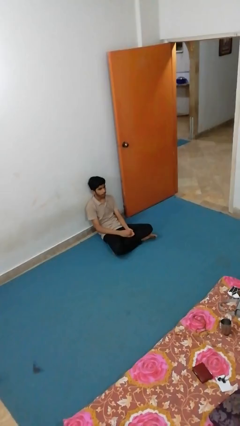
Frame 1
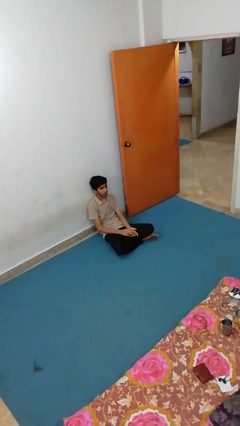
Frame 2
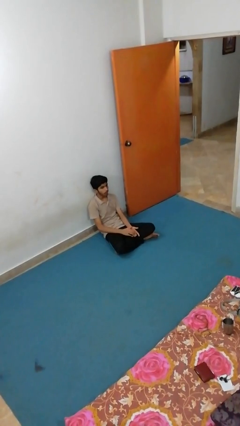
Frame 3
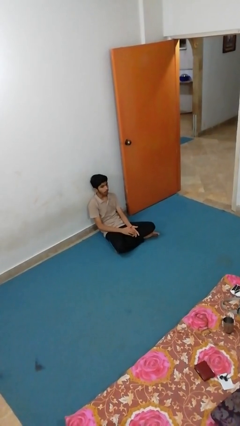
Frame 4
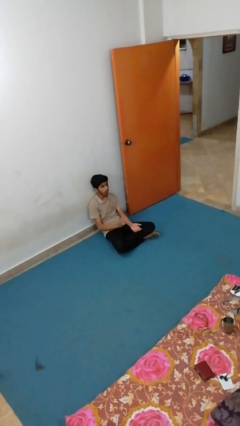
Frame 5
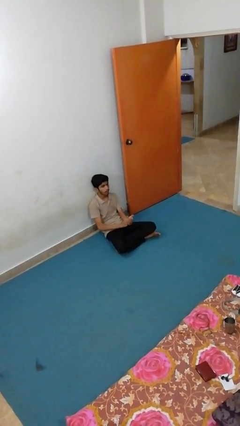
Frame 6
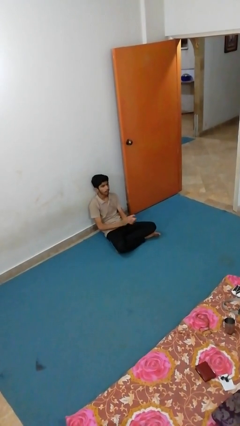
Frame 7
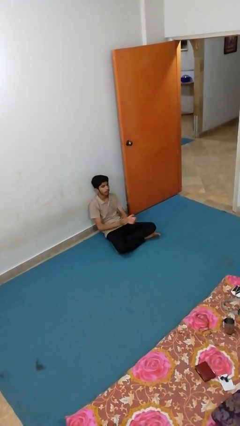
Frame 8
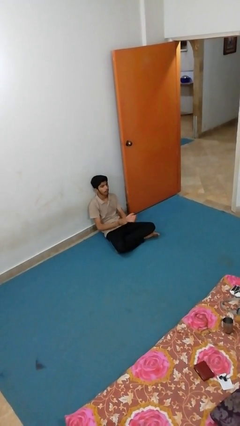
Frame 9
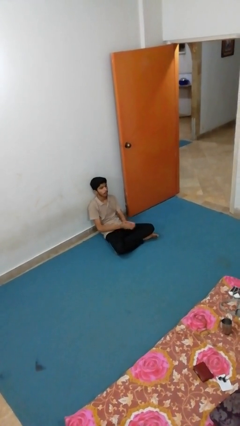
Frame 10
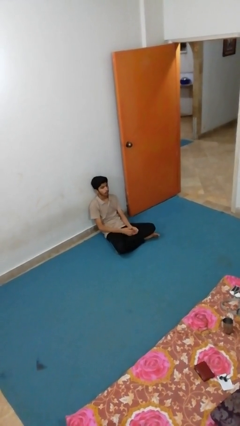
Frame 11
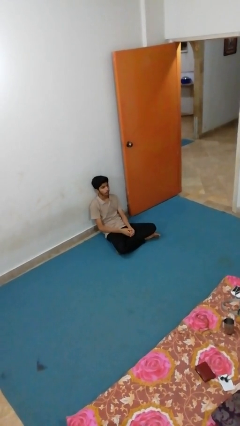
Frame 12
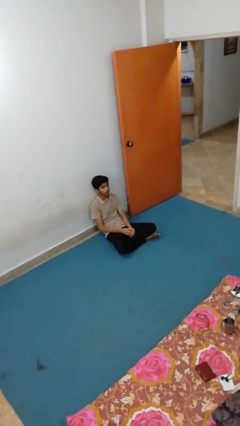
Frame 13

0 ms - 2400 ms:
person claps hands

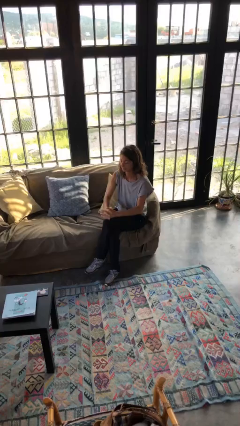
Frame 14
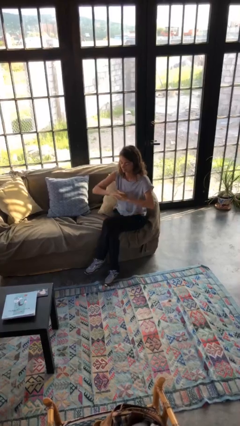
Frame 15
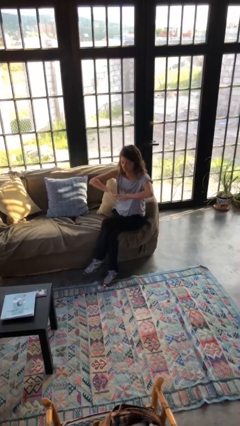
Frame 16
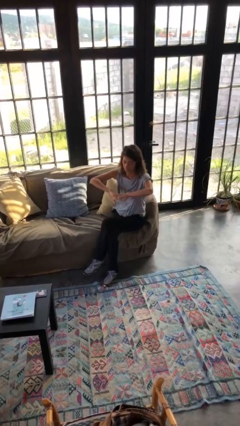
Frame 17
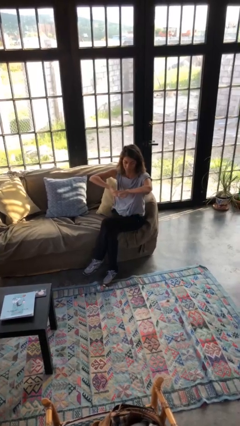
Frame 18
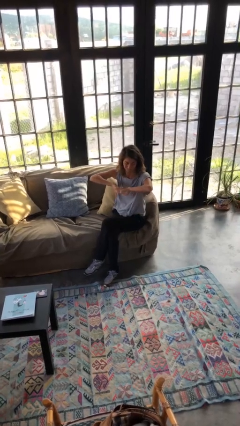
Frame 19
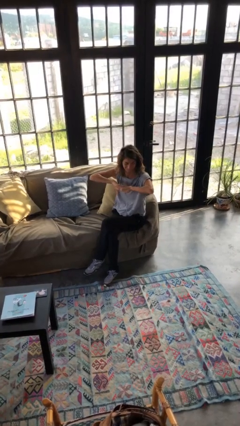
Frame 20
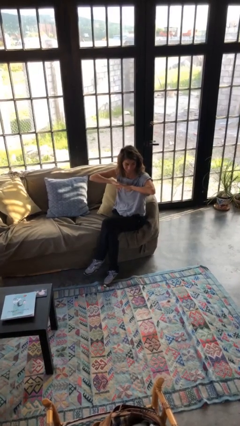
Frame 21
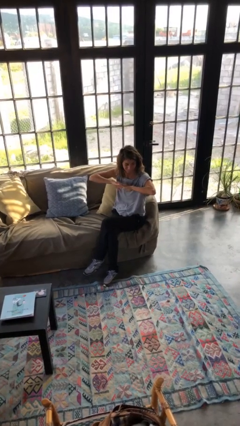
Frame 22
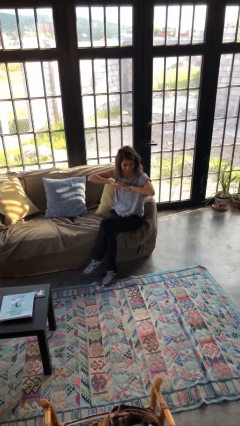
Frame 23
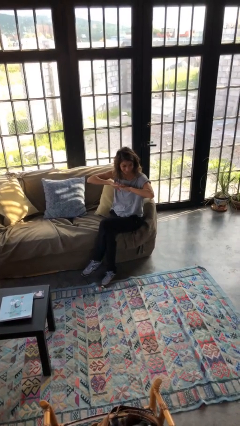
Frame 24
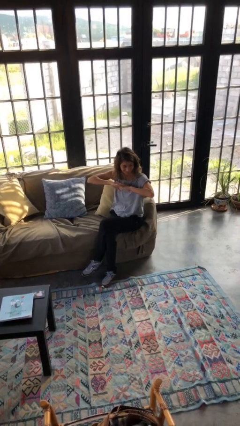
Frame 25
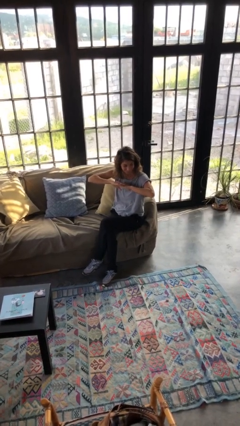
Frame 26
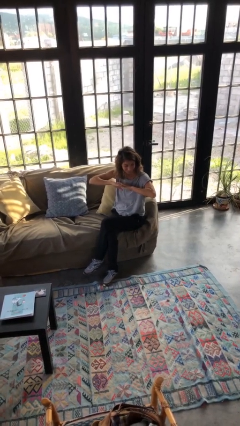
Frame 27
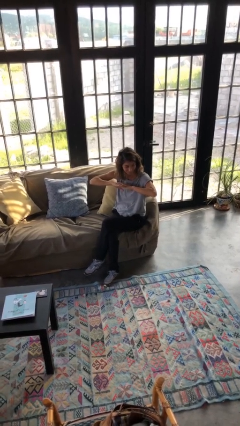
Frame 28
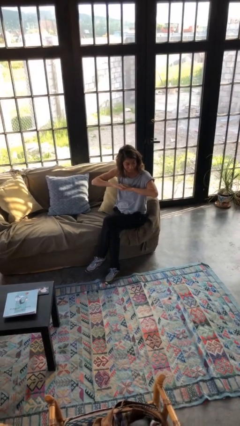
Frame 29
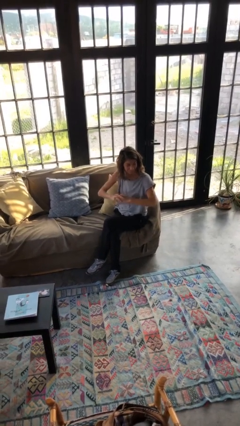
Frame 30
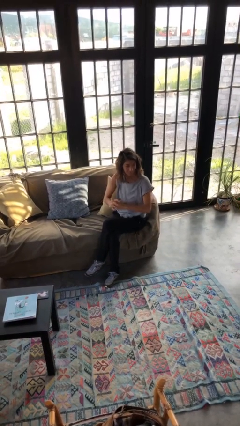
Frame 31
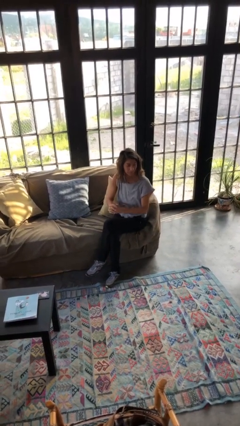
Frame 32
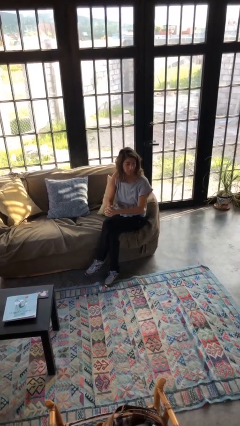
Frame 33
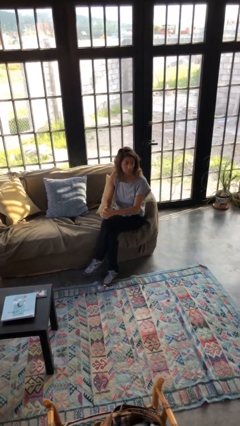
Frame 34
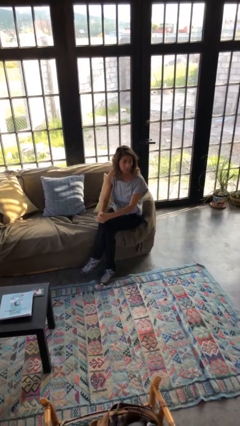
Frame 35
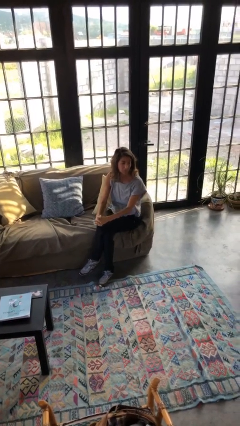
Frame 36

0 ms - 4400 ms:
person cracks knuckles

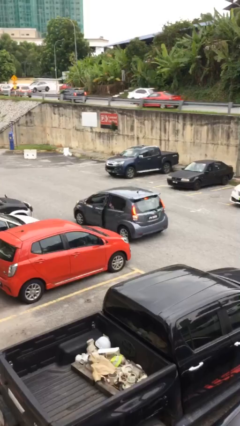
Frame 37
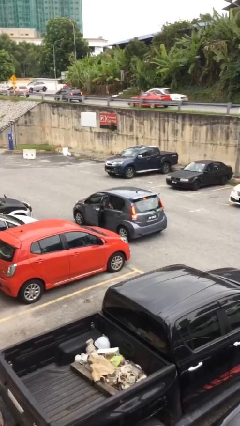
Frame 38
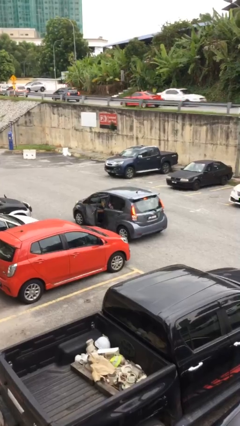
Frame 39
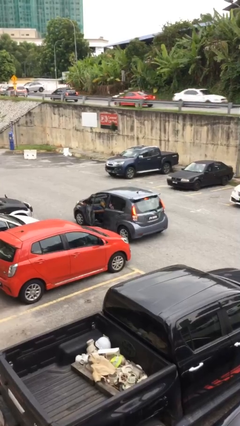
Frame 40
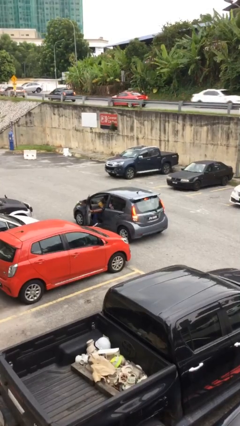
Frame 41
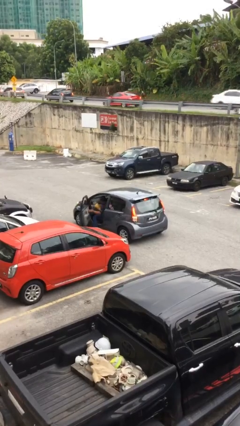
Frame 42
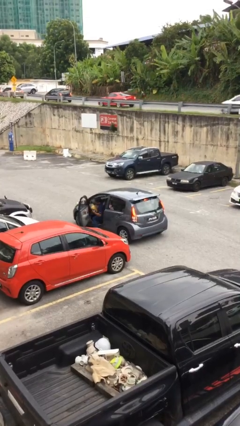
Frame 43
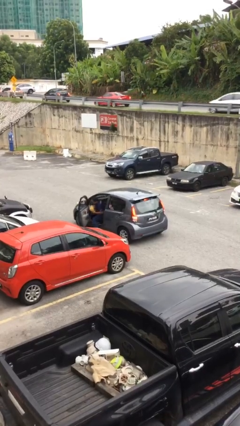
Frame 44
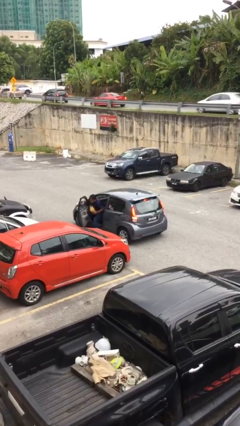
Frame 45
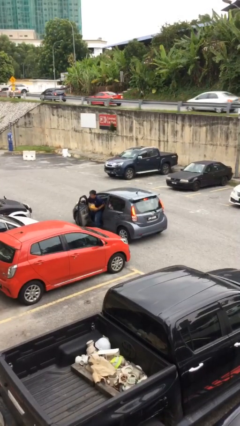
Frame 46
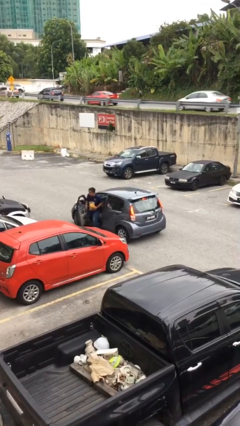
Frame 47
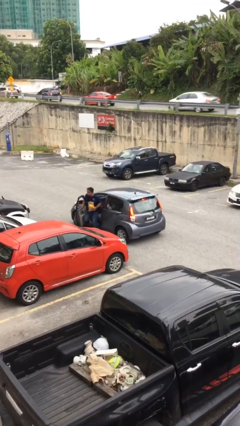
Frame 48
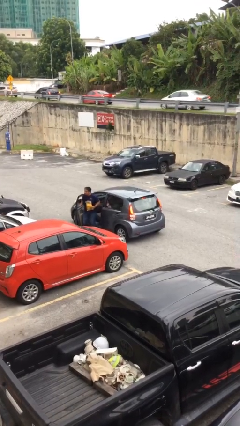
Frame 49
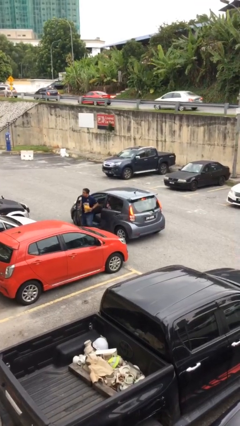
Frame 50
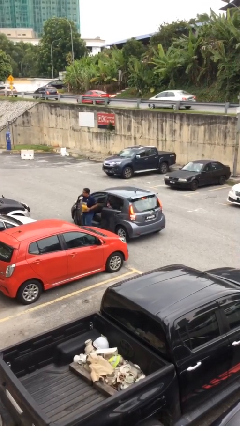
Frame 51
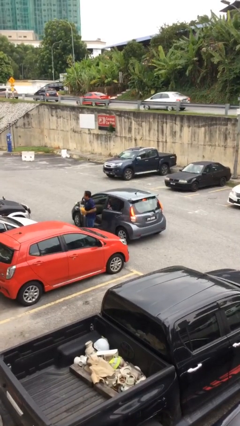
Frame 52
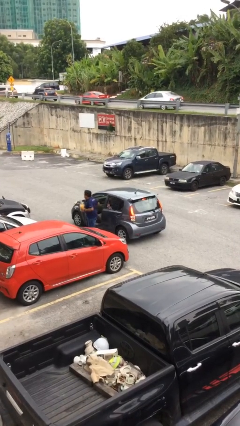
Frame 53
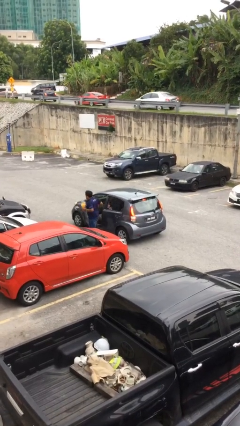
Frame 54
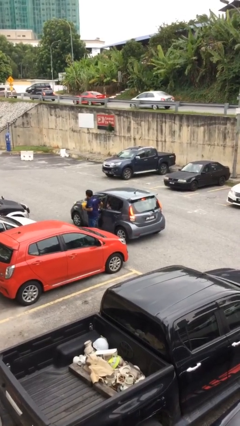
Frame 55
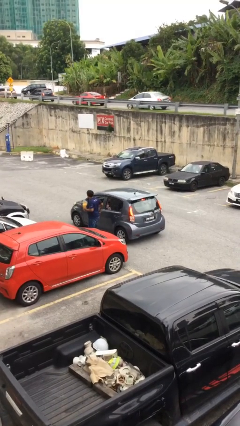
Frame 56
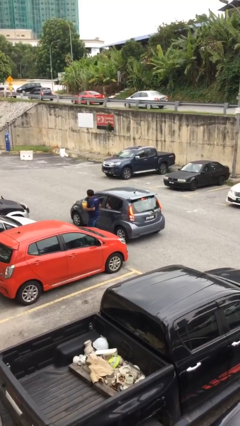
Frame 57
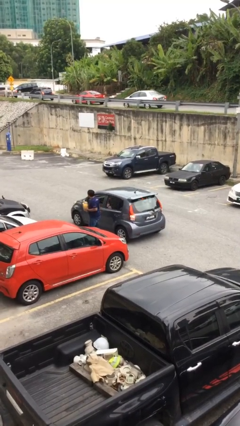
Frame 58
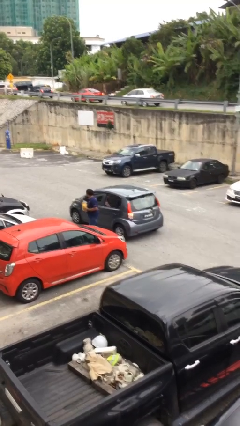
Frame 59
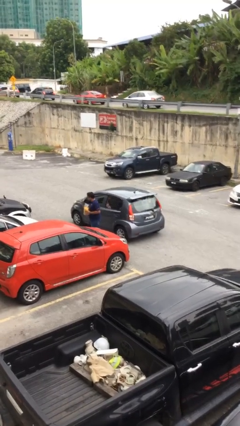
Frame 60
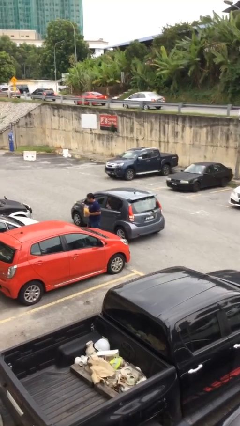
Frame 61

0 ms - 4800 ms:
car drops off person

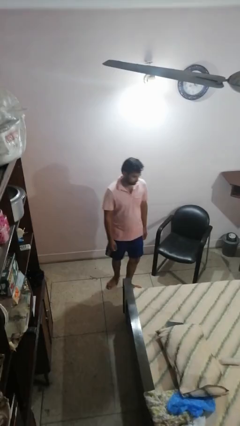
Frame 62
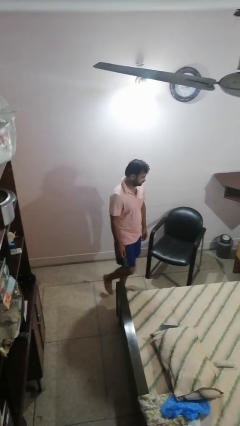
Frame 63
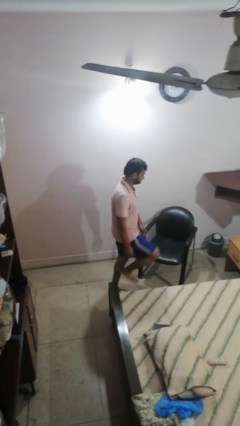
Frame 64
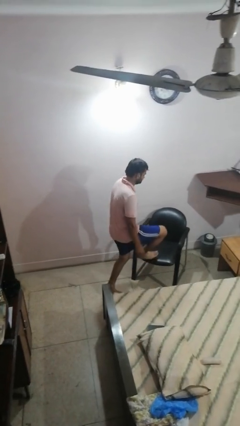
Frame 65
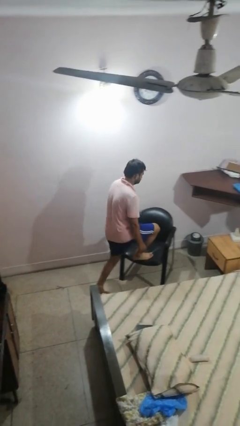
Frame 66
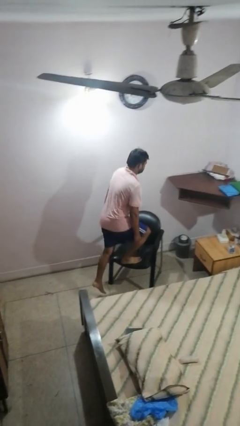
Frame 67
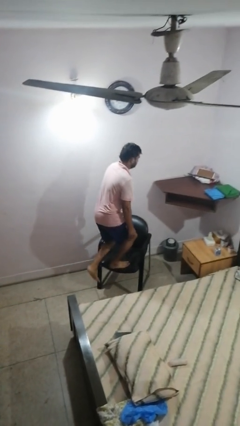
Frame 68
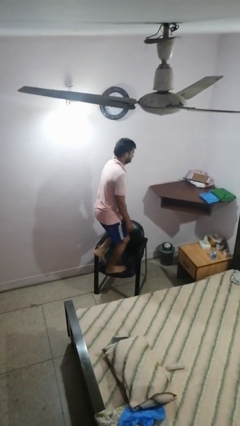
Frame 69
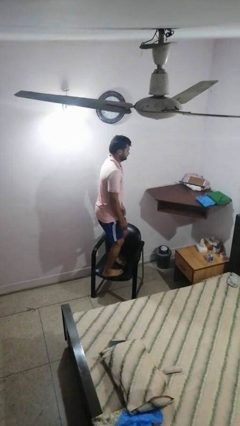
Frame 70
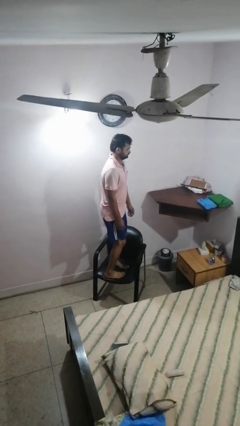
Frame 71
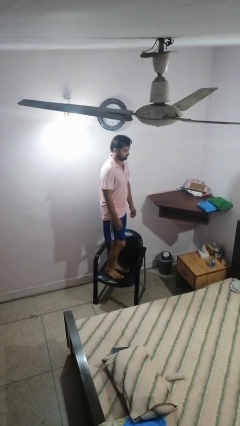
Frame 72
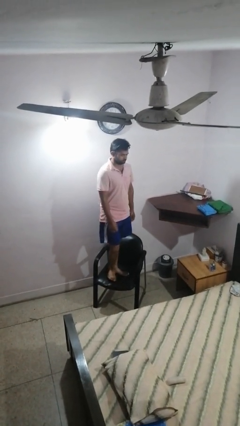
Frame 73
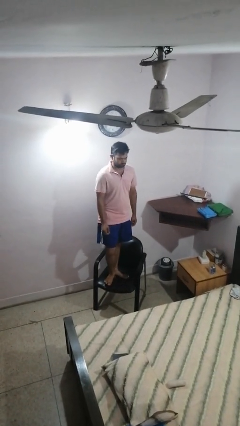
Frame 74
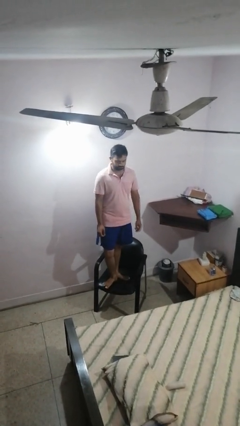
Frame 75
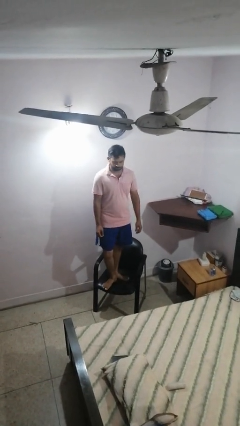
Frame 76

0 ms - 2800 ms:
person climbs on chair

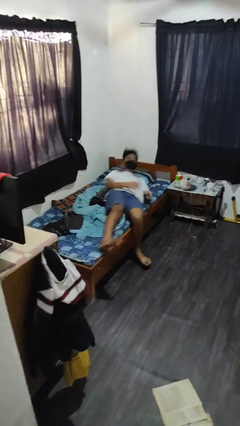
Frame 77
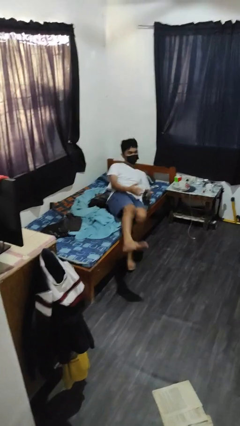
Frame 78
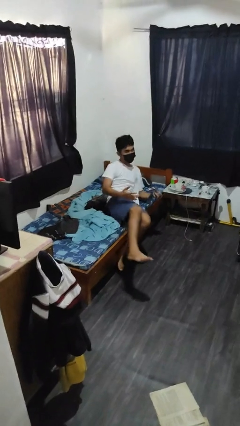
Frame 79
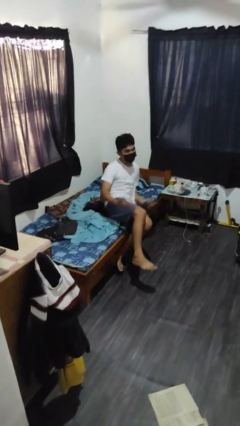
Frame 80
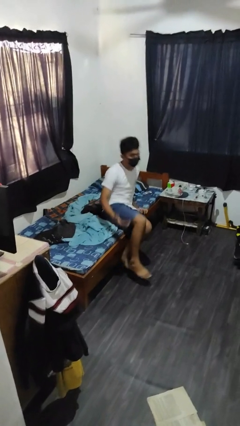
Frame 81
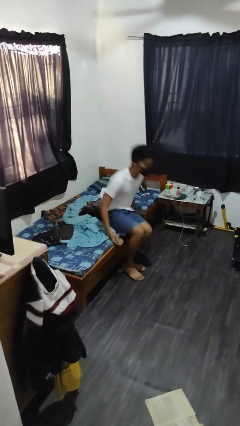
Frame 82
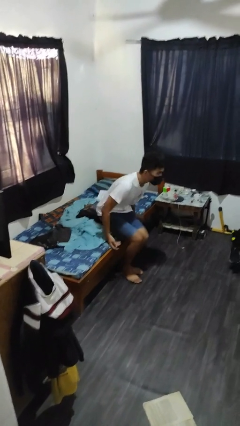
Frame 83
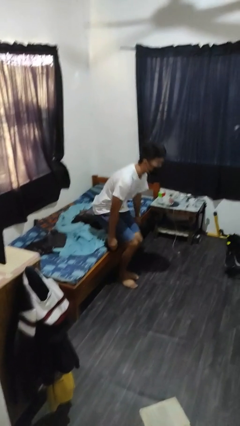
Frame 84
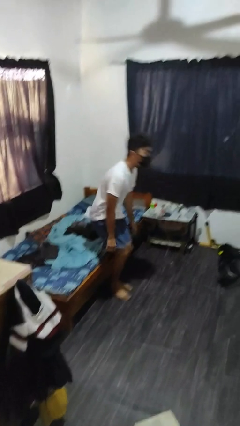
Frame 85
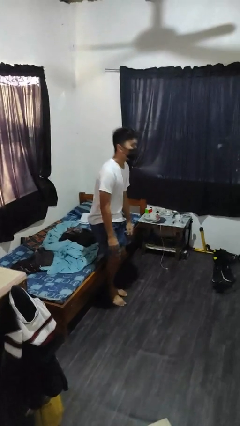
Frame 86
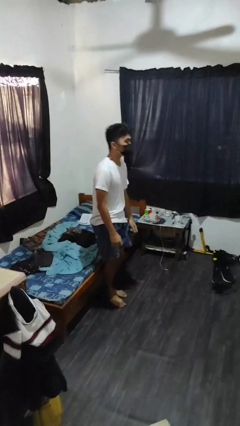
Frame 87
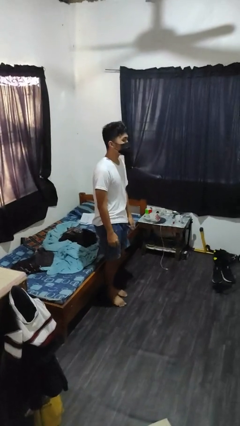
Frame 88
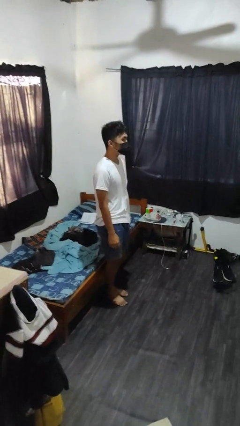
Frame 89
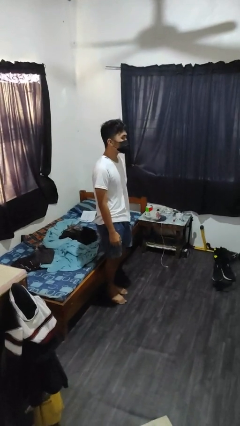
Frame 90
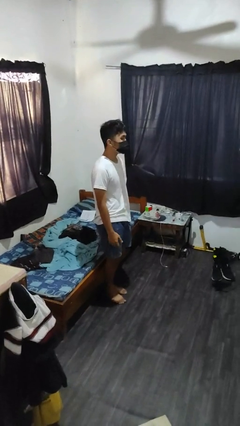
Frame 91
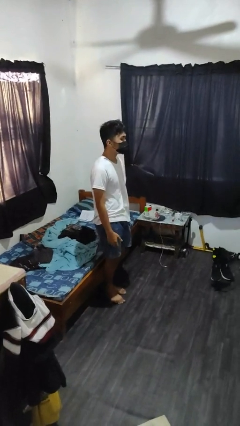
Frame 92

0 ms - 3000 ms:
person stands up
